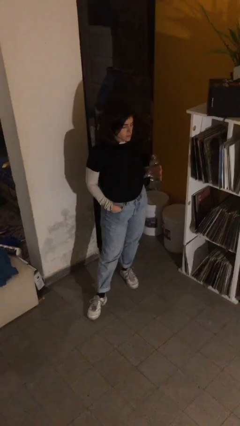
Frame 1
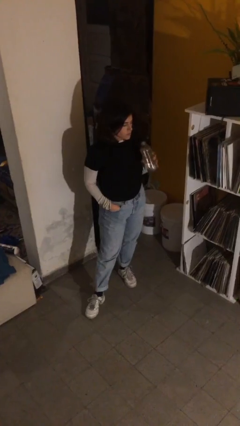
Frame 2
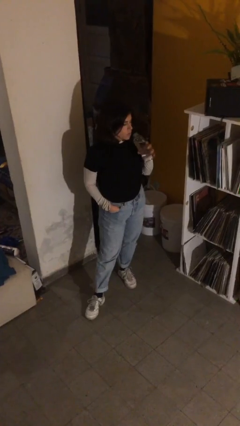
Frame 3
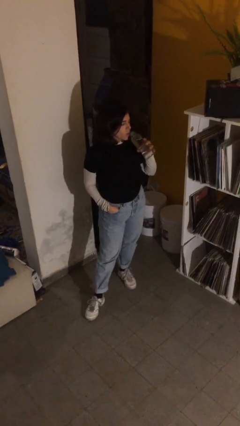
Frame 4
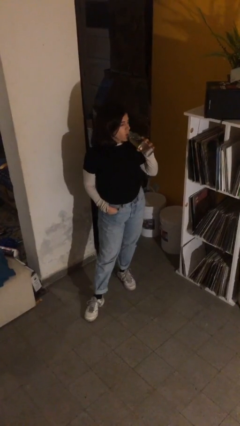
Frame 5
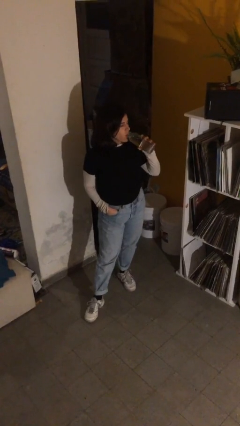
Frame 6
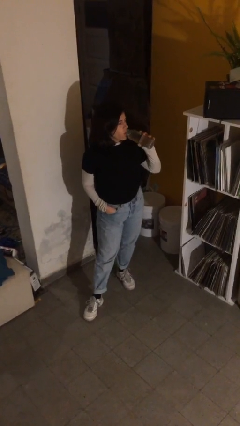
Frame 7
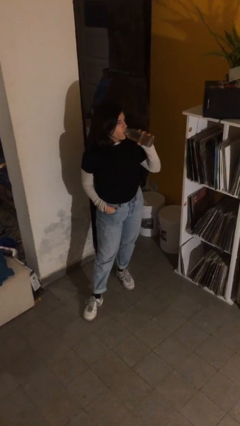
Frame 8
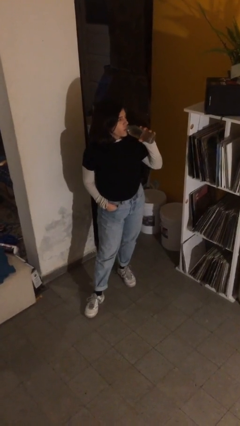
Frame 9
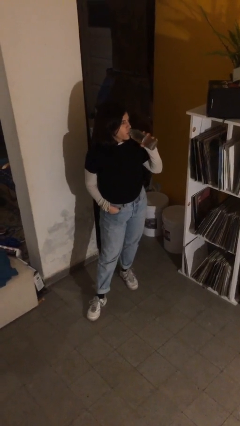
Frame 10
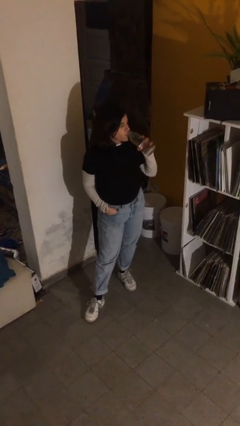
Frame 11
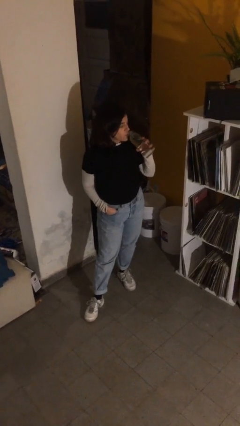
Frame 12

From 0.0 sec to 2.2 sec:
person drinks from bottle

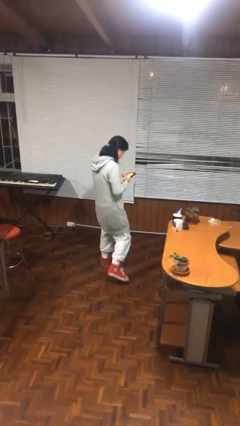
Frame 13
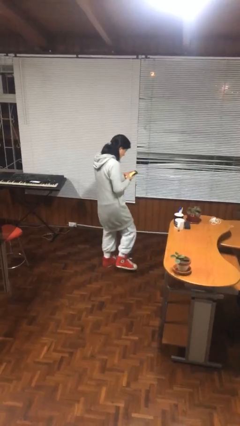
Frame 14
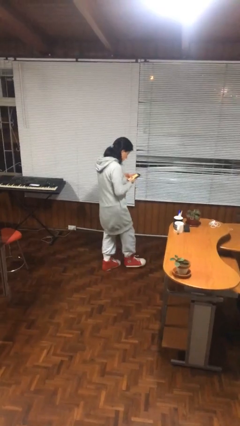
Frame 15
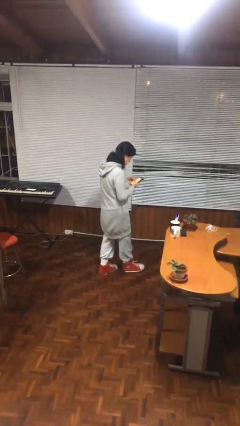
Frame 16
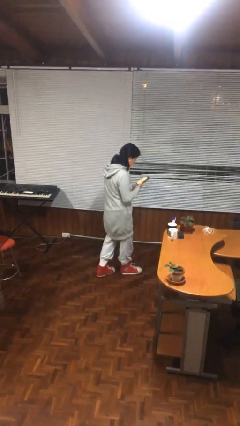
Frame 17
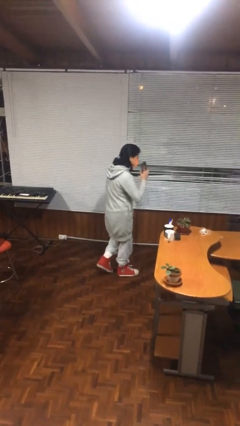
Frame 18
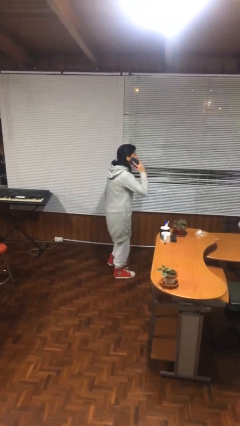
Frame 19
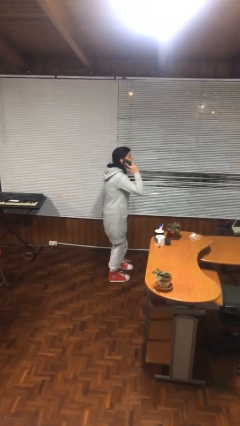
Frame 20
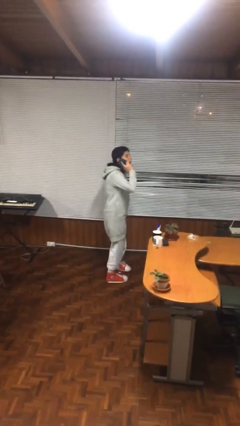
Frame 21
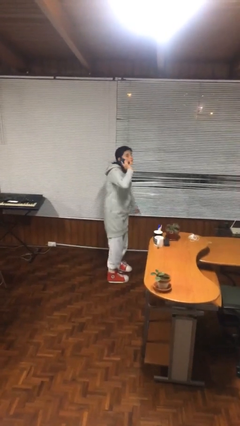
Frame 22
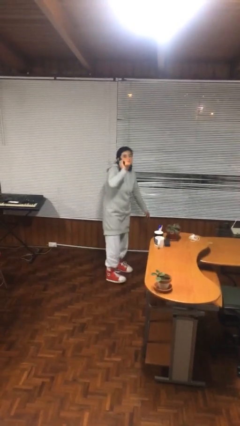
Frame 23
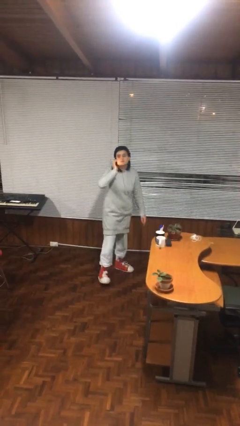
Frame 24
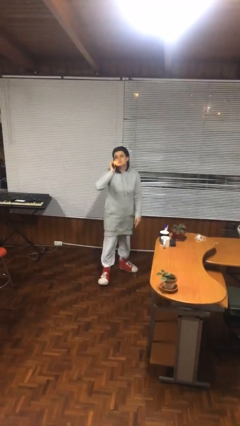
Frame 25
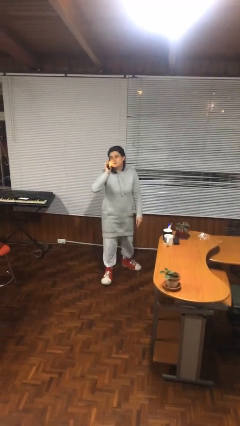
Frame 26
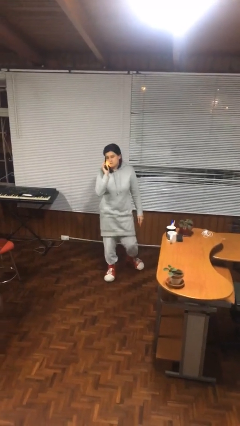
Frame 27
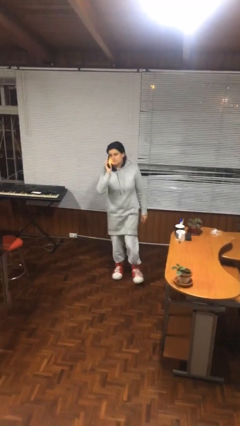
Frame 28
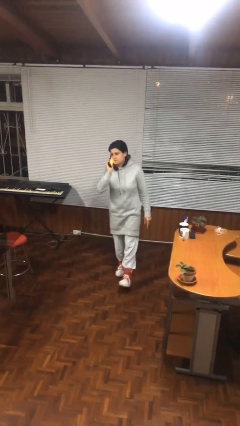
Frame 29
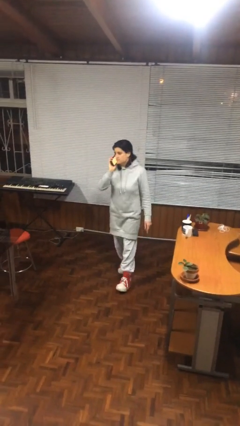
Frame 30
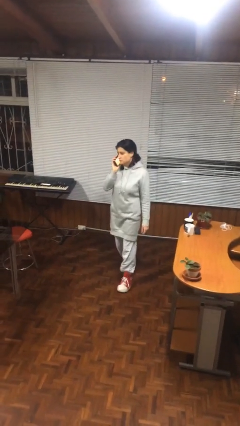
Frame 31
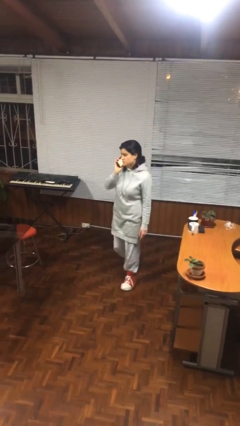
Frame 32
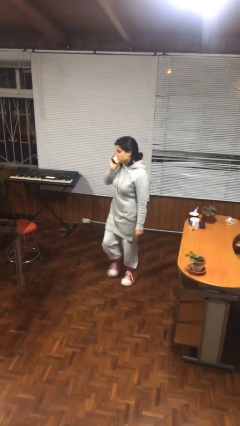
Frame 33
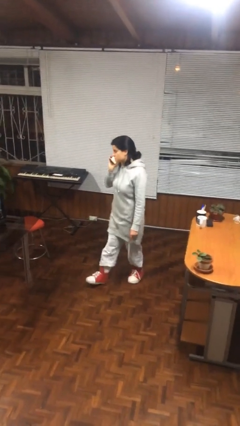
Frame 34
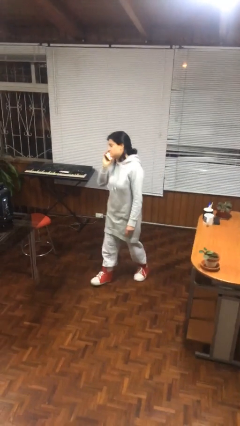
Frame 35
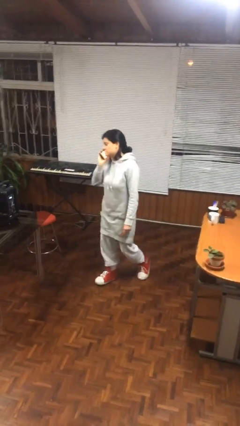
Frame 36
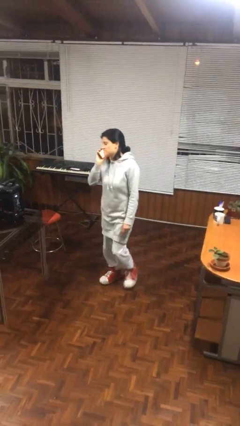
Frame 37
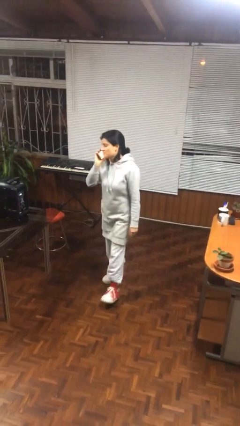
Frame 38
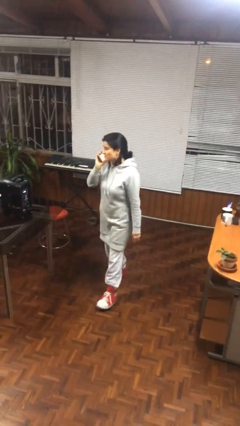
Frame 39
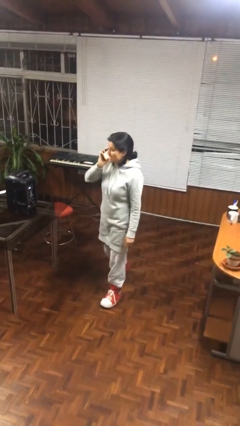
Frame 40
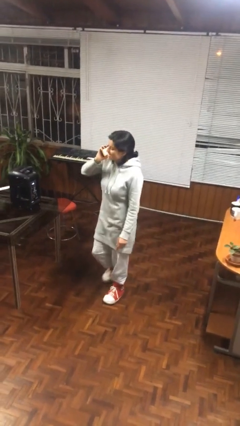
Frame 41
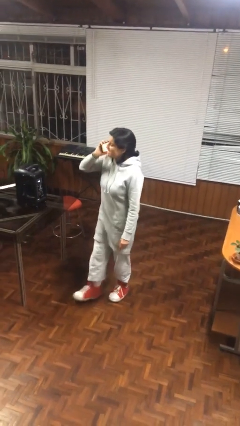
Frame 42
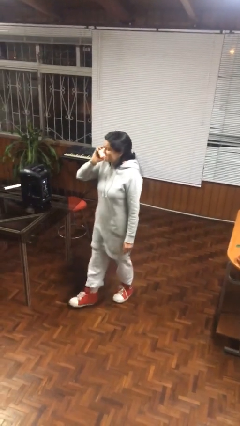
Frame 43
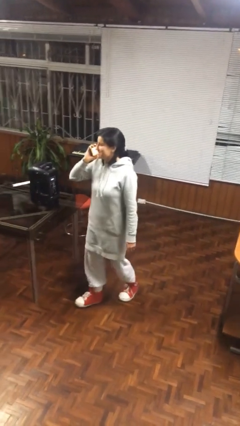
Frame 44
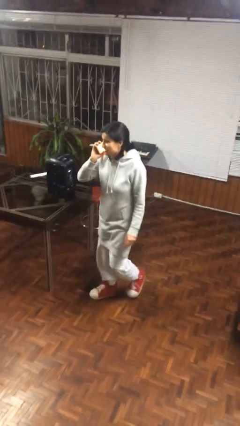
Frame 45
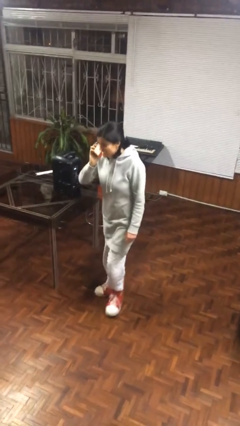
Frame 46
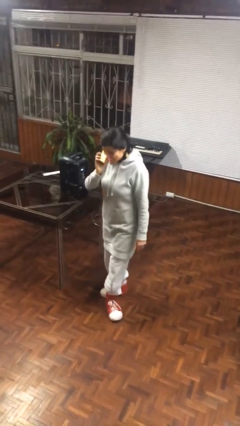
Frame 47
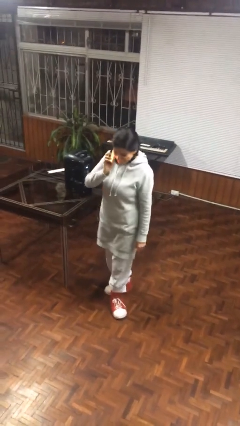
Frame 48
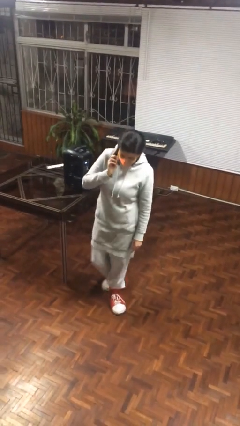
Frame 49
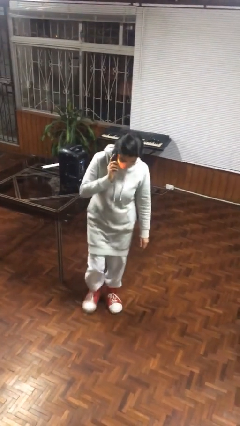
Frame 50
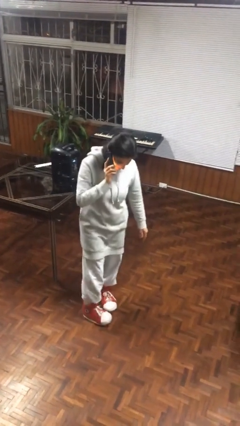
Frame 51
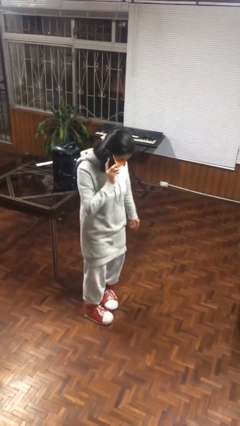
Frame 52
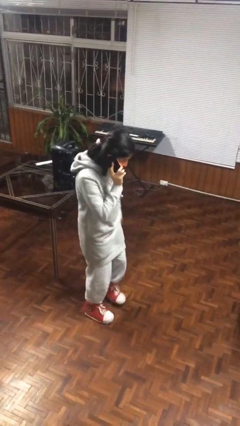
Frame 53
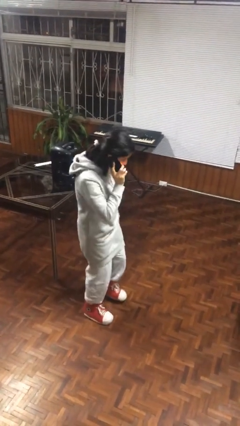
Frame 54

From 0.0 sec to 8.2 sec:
person talks on phone

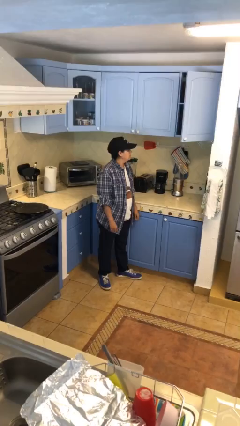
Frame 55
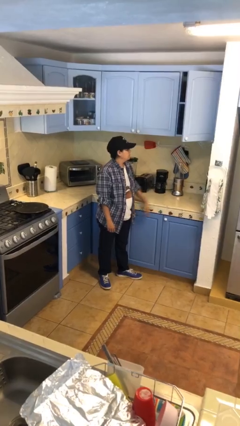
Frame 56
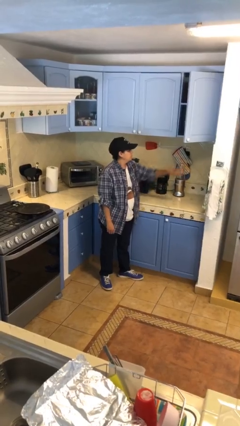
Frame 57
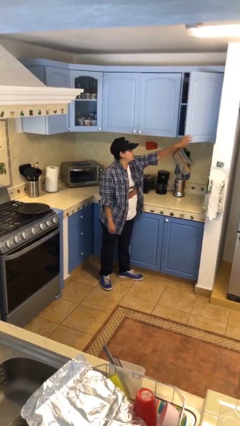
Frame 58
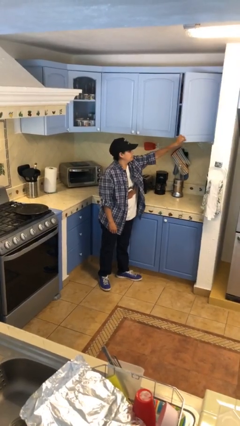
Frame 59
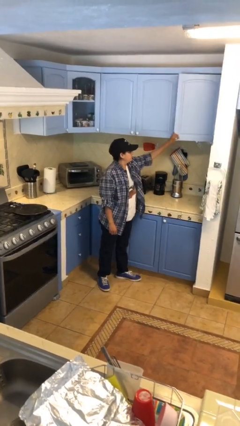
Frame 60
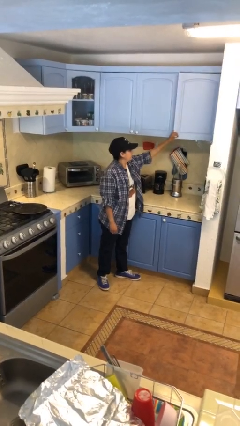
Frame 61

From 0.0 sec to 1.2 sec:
person closes cabinet

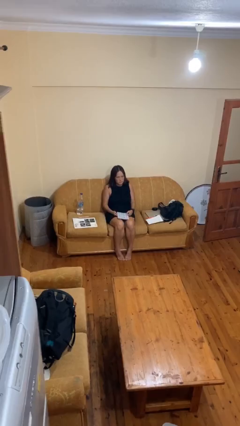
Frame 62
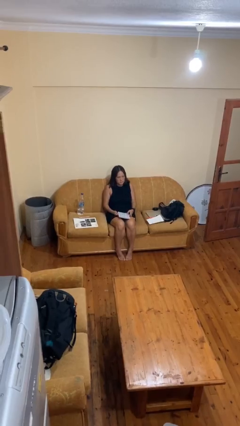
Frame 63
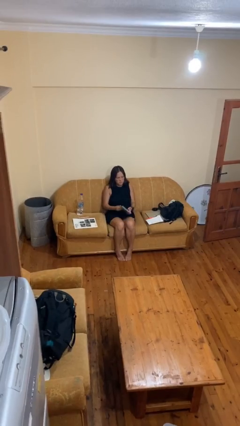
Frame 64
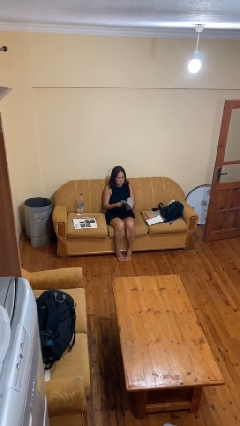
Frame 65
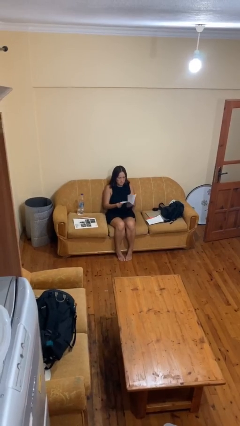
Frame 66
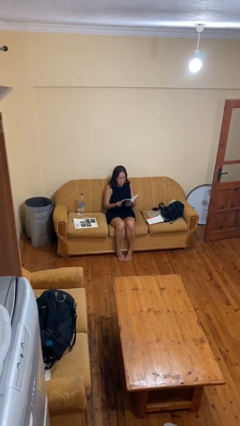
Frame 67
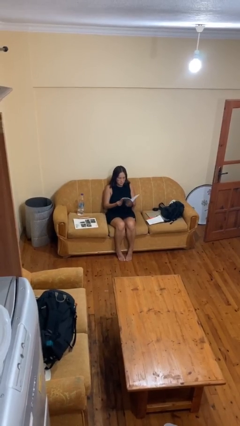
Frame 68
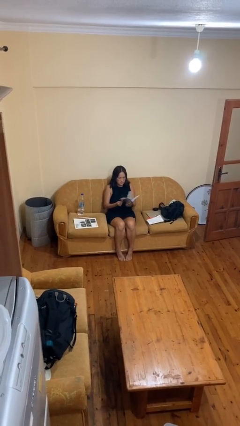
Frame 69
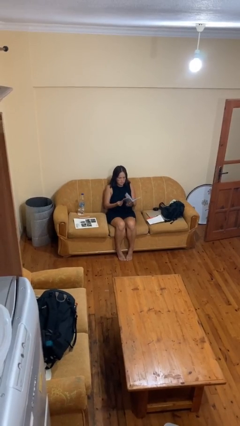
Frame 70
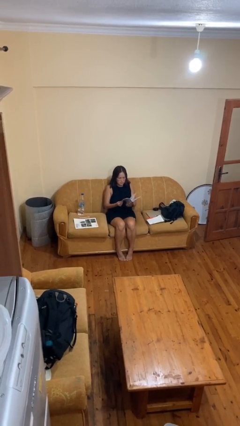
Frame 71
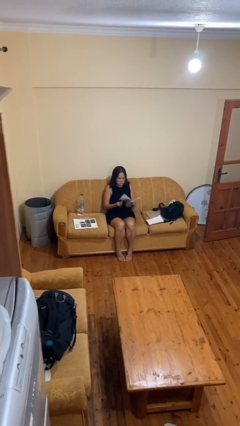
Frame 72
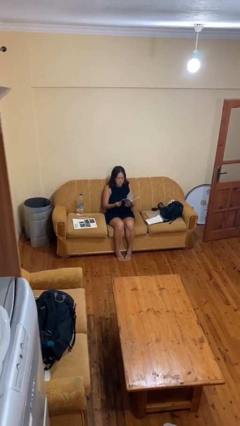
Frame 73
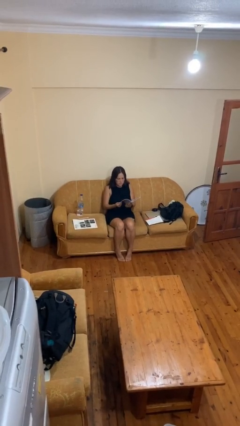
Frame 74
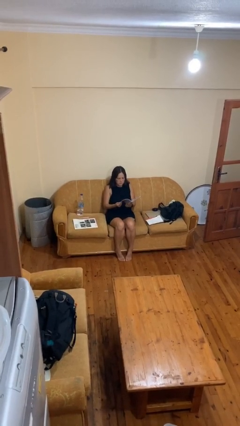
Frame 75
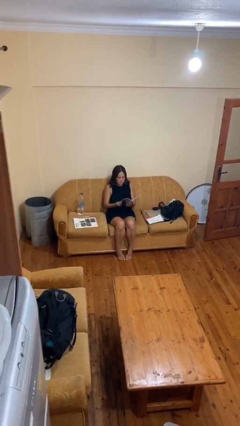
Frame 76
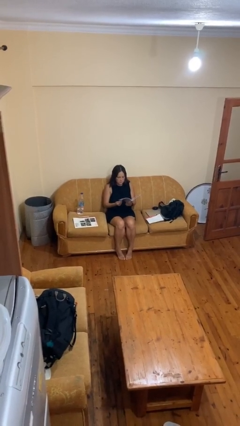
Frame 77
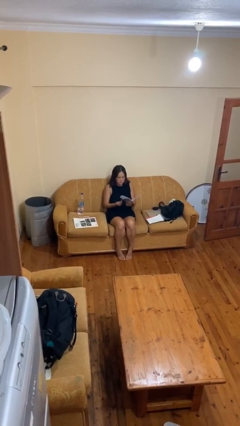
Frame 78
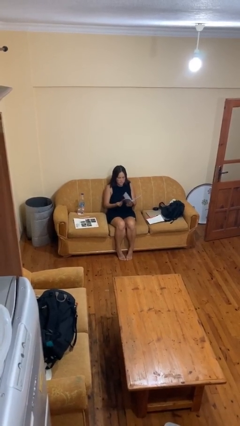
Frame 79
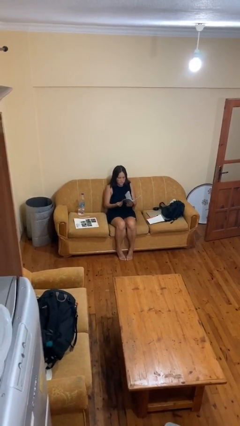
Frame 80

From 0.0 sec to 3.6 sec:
person reads book

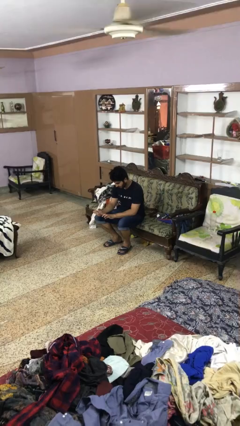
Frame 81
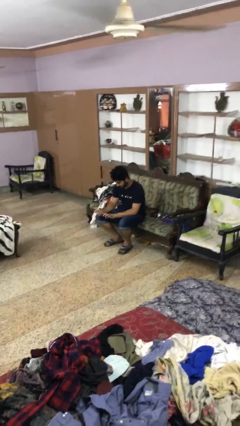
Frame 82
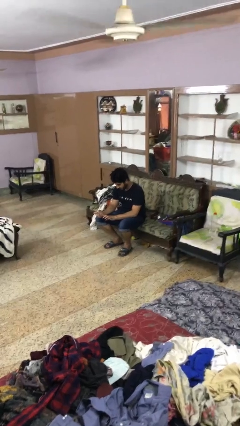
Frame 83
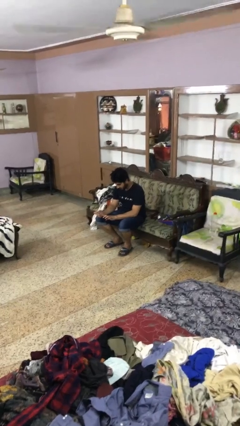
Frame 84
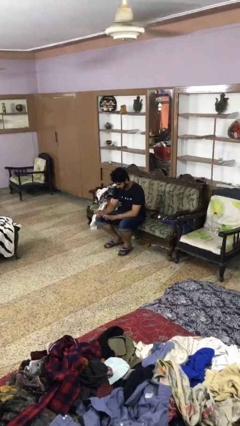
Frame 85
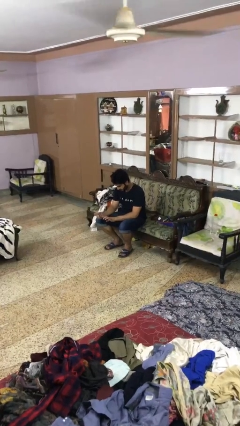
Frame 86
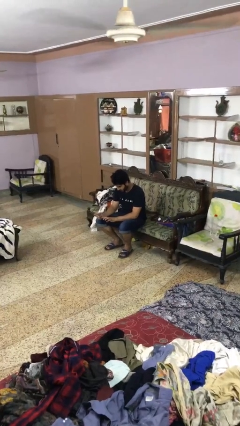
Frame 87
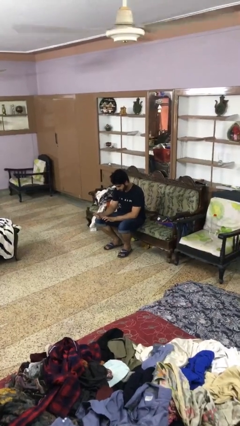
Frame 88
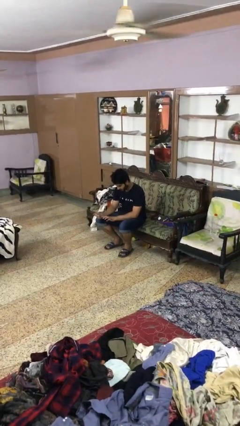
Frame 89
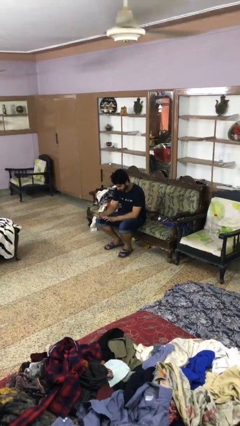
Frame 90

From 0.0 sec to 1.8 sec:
person clips fingernails

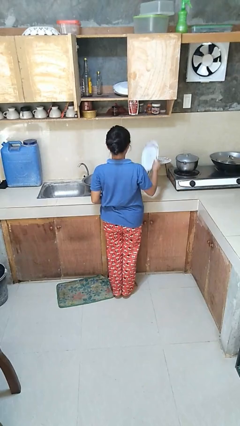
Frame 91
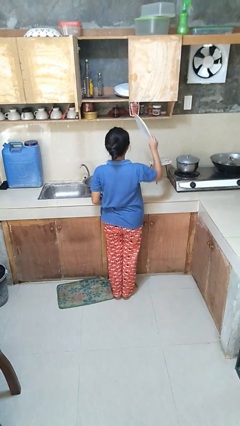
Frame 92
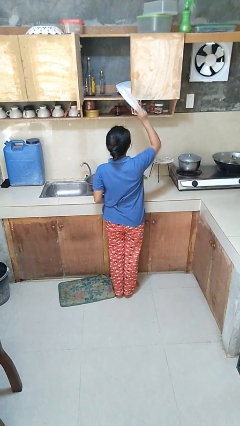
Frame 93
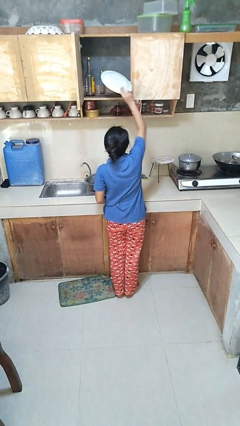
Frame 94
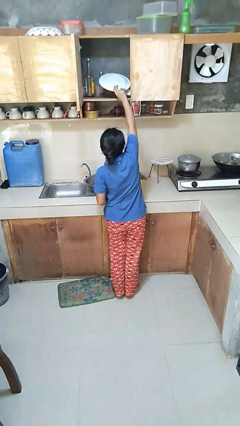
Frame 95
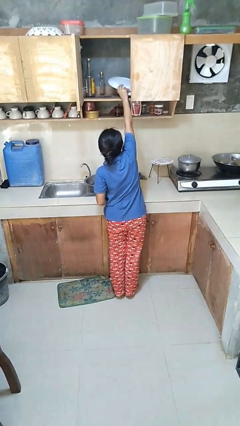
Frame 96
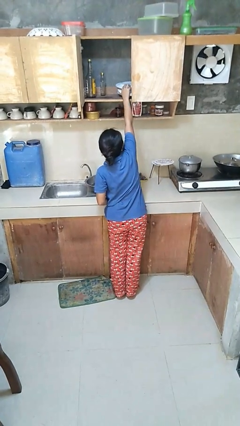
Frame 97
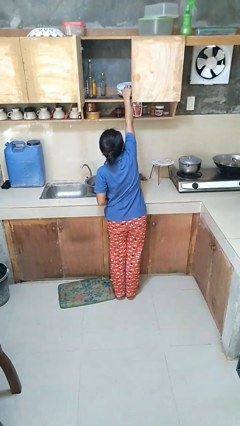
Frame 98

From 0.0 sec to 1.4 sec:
person puts object in cabinet
